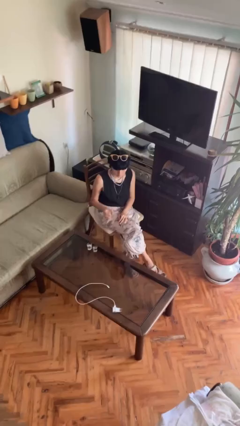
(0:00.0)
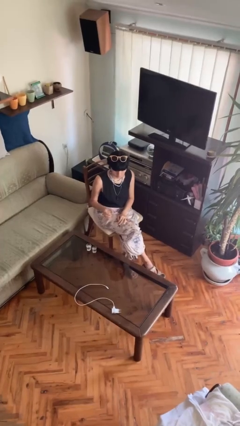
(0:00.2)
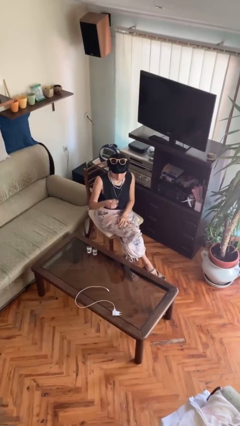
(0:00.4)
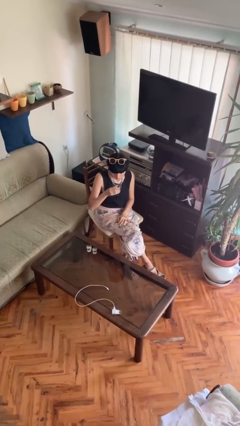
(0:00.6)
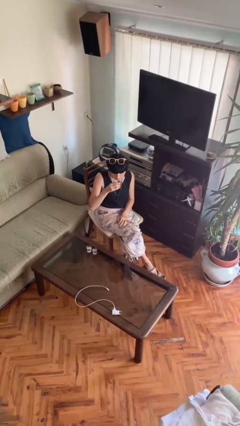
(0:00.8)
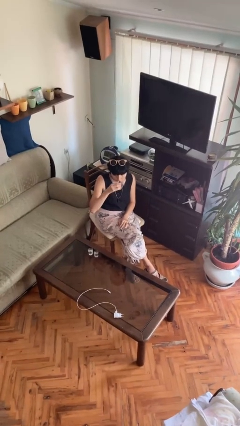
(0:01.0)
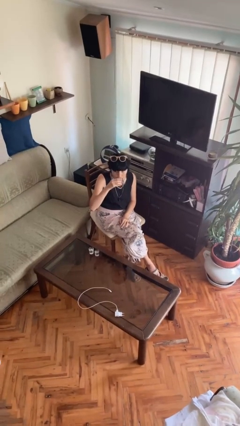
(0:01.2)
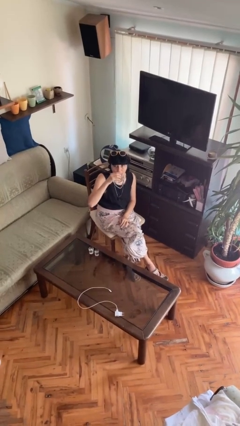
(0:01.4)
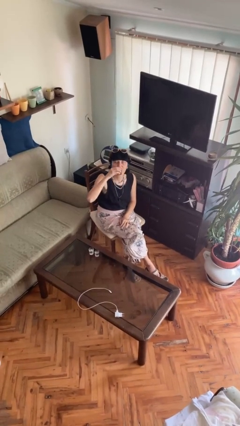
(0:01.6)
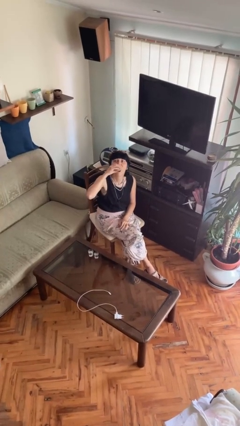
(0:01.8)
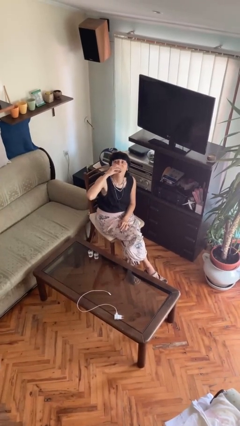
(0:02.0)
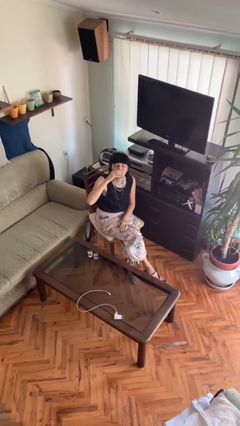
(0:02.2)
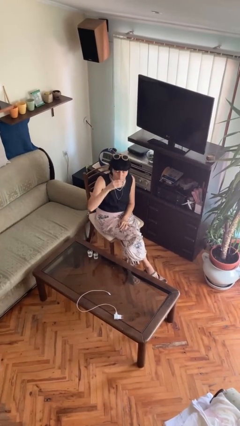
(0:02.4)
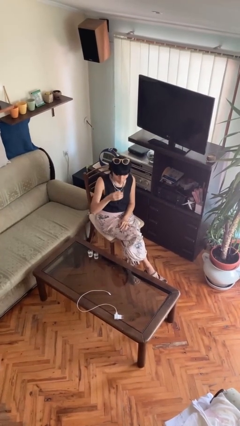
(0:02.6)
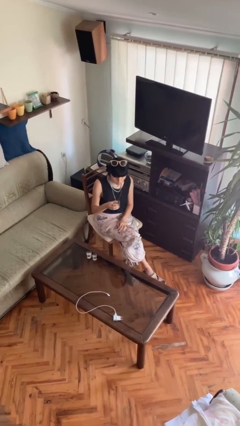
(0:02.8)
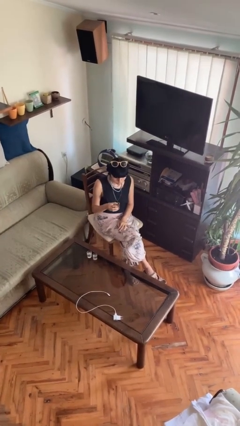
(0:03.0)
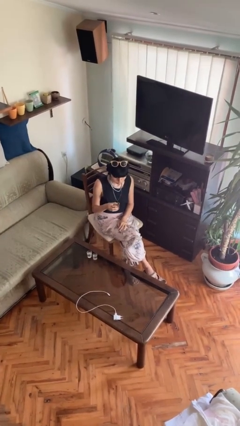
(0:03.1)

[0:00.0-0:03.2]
person drinks from shotglass

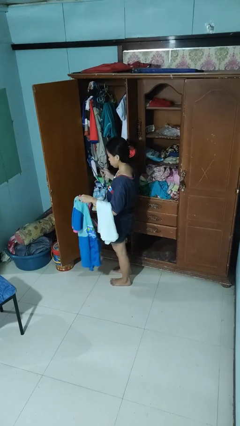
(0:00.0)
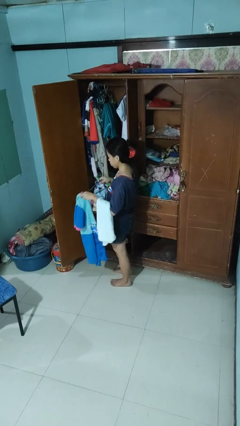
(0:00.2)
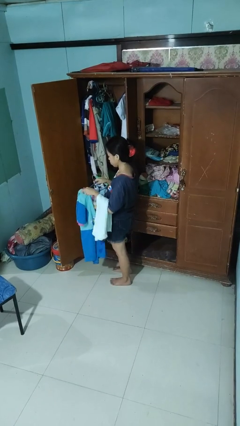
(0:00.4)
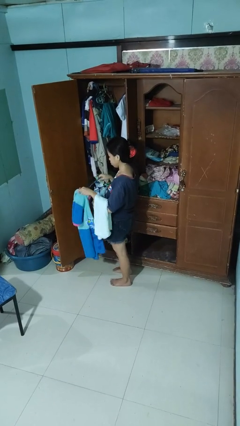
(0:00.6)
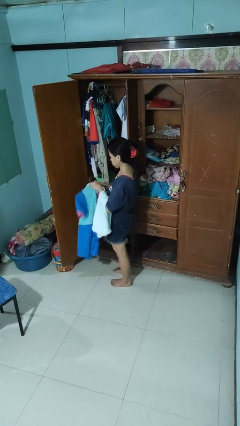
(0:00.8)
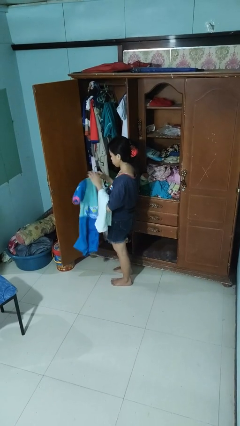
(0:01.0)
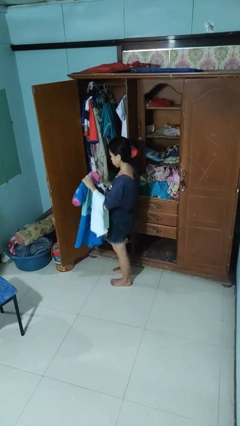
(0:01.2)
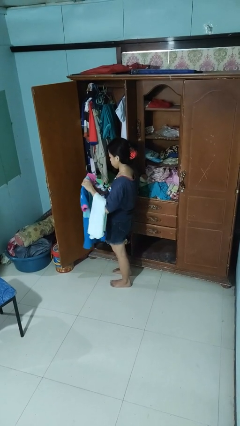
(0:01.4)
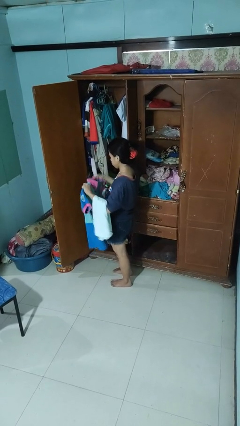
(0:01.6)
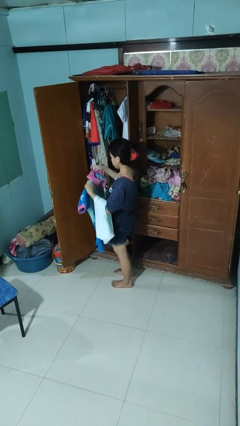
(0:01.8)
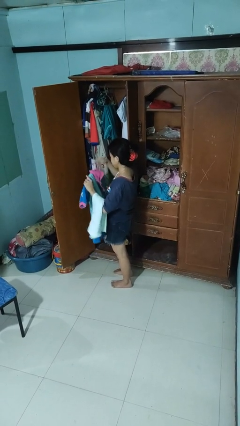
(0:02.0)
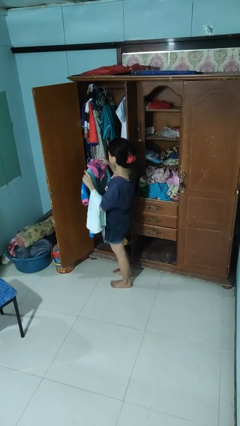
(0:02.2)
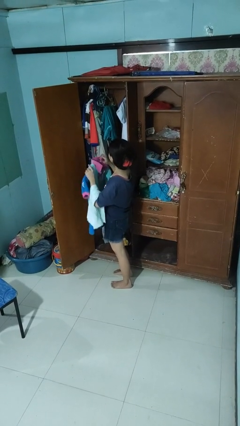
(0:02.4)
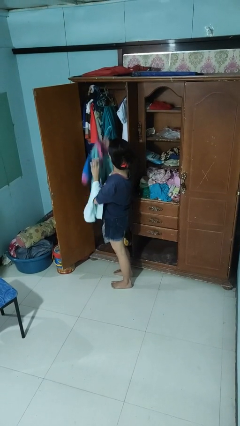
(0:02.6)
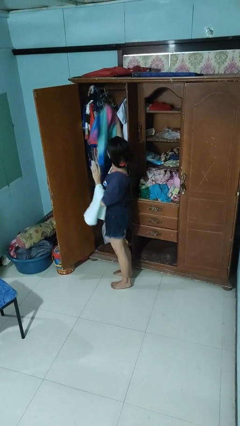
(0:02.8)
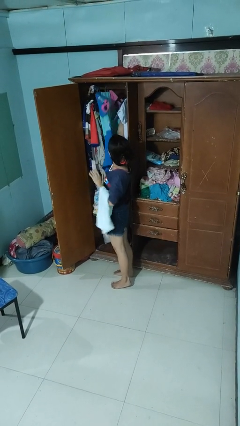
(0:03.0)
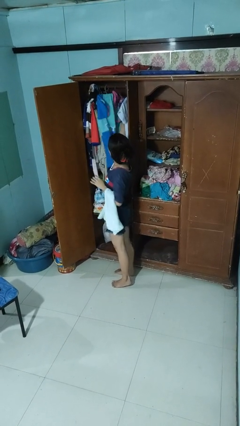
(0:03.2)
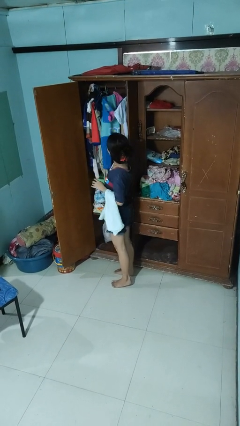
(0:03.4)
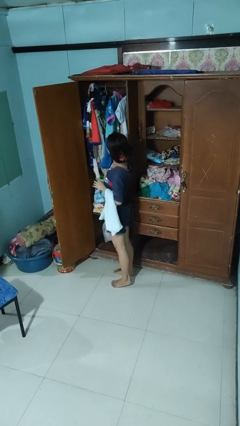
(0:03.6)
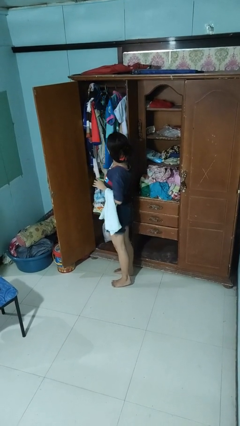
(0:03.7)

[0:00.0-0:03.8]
person puts clothes into closet

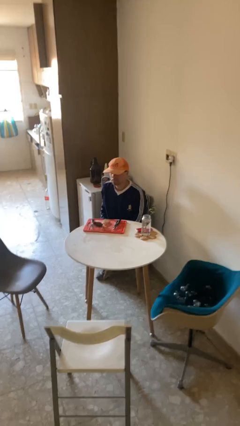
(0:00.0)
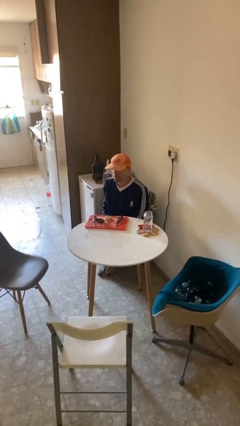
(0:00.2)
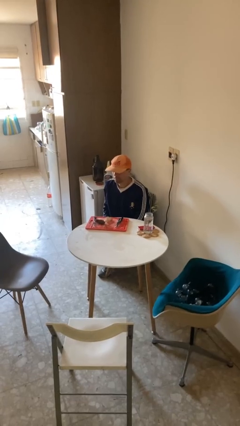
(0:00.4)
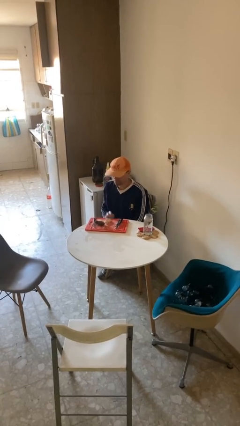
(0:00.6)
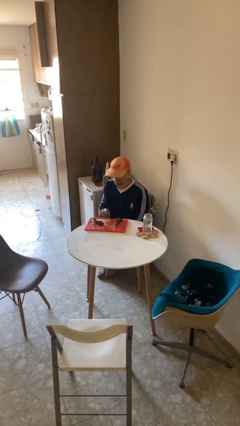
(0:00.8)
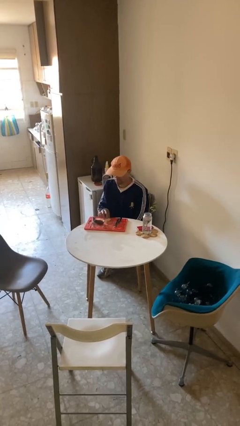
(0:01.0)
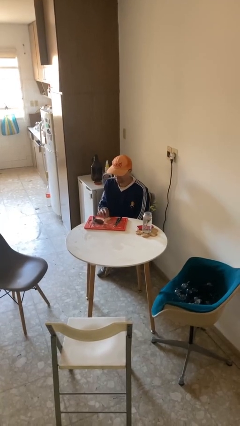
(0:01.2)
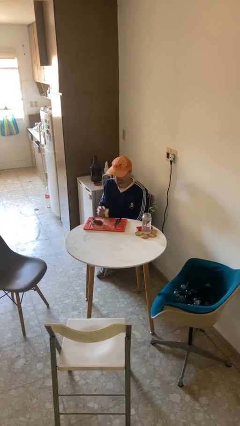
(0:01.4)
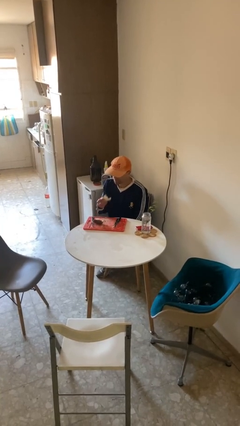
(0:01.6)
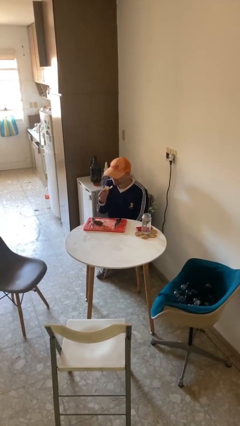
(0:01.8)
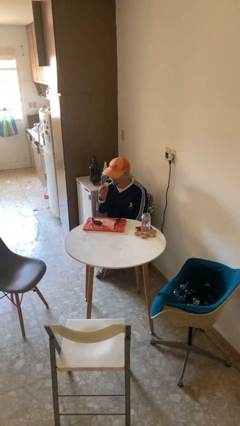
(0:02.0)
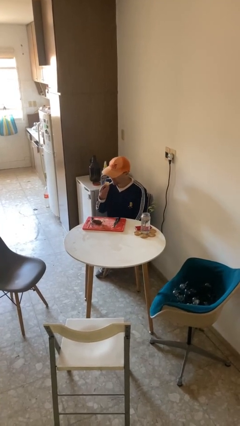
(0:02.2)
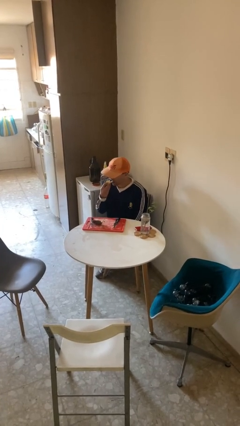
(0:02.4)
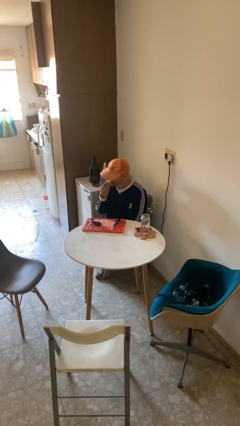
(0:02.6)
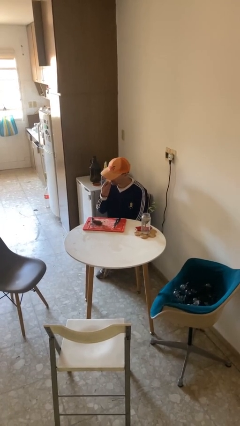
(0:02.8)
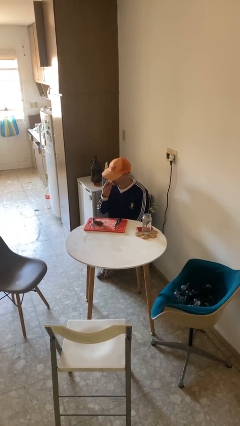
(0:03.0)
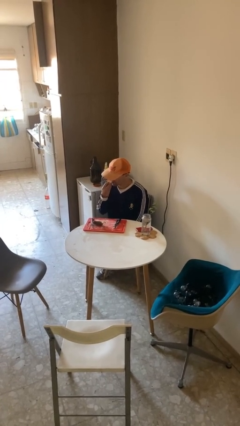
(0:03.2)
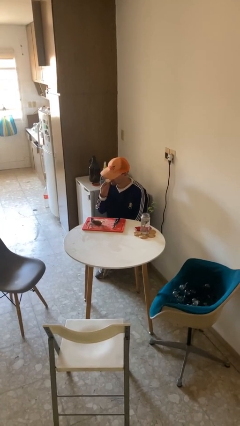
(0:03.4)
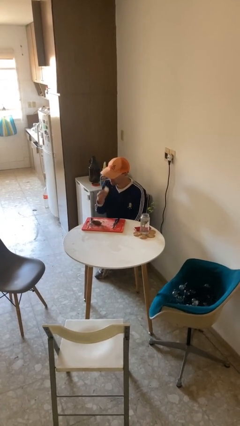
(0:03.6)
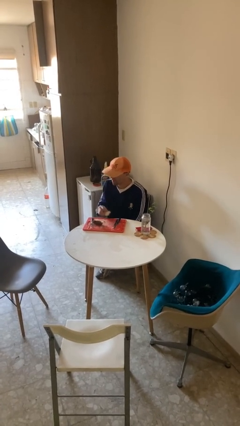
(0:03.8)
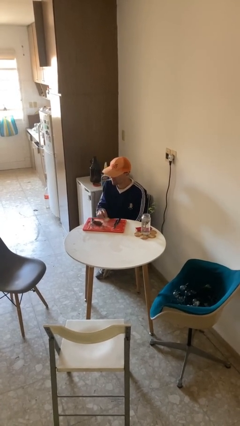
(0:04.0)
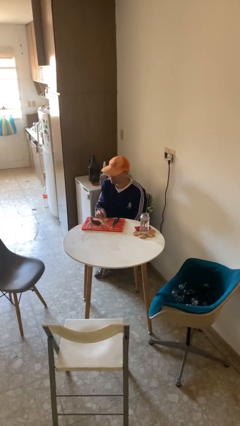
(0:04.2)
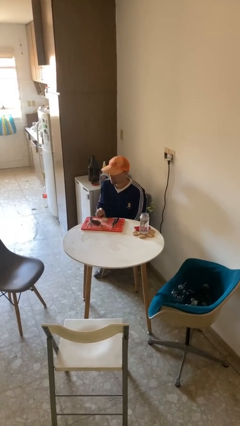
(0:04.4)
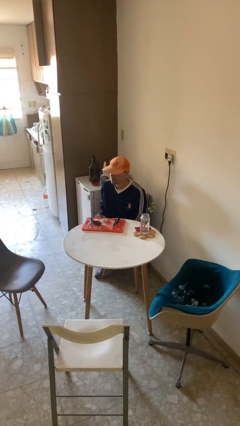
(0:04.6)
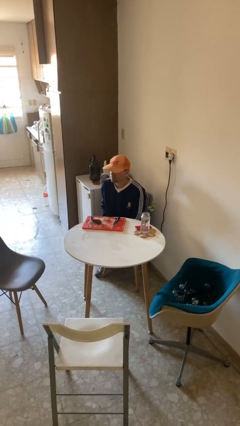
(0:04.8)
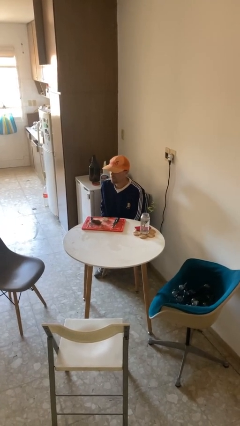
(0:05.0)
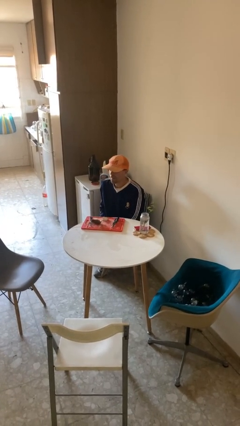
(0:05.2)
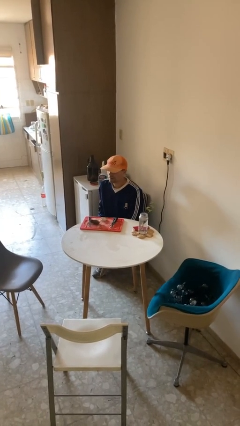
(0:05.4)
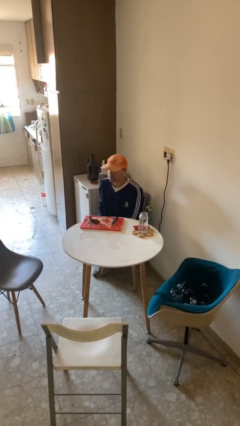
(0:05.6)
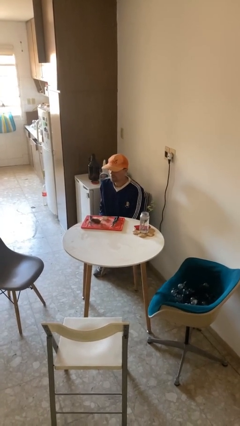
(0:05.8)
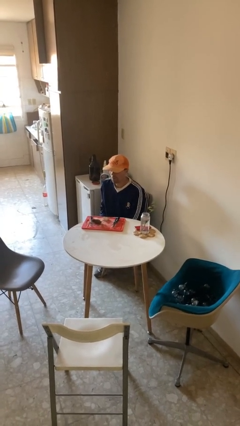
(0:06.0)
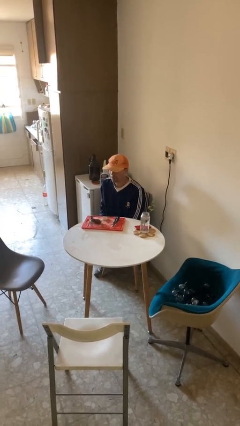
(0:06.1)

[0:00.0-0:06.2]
person eats with hands

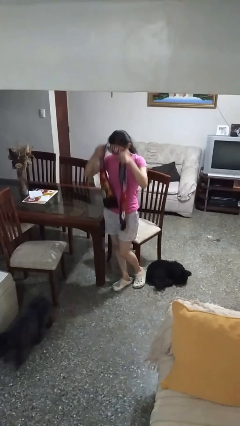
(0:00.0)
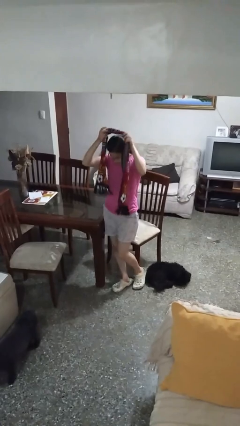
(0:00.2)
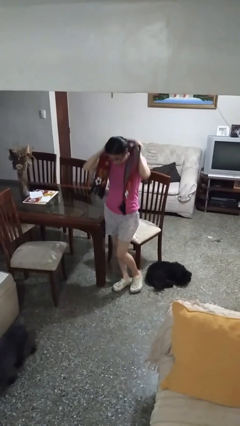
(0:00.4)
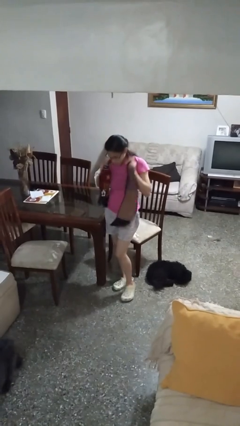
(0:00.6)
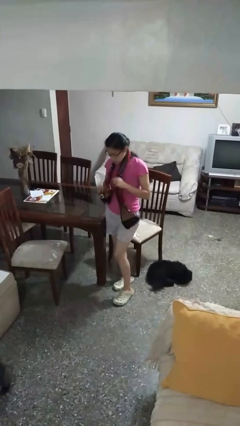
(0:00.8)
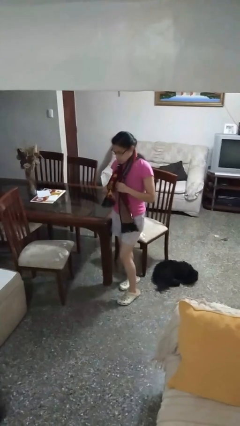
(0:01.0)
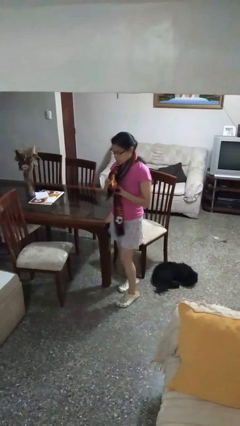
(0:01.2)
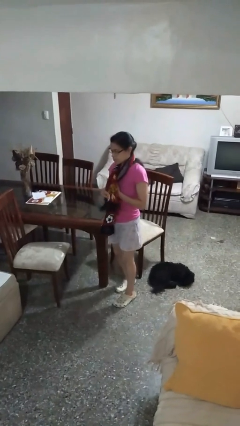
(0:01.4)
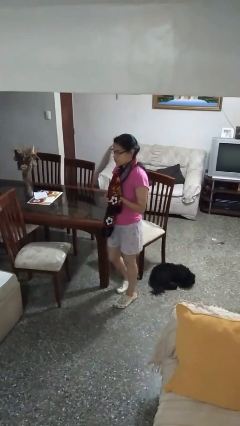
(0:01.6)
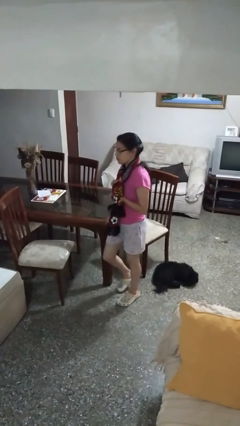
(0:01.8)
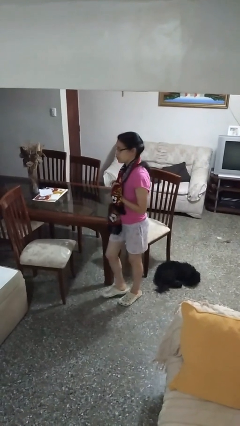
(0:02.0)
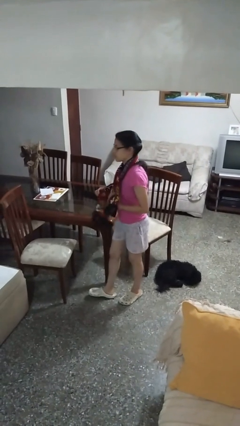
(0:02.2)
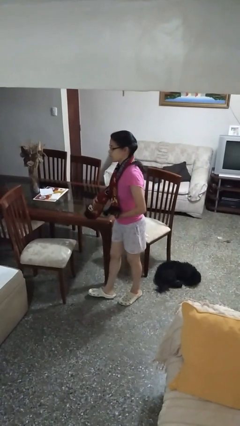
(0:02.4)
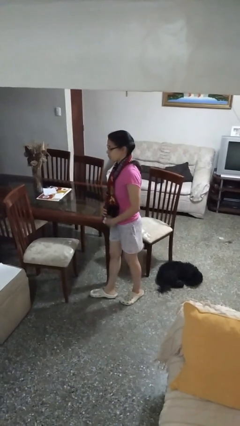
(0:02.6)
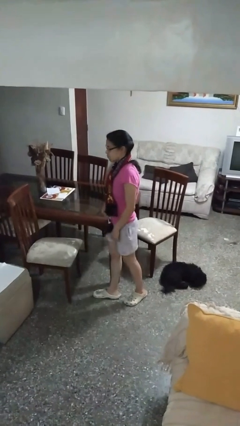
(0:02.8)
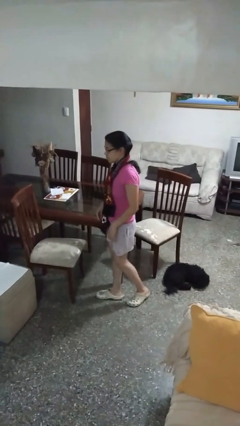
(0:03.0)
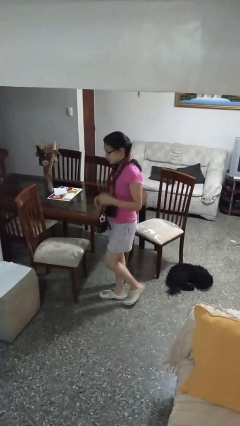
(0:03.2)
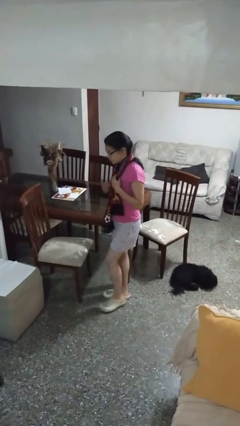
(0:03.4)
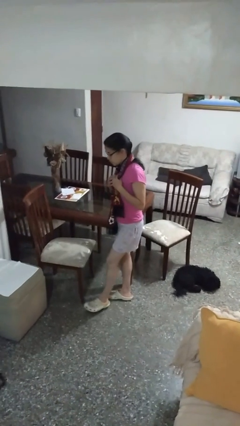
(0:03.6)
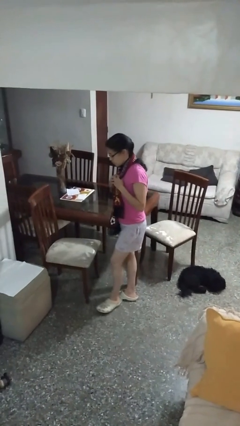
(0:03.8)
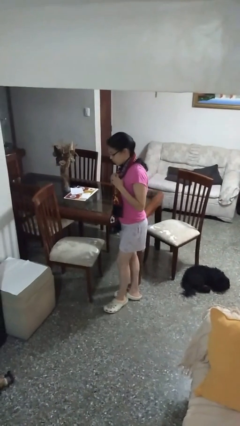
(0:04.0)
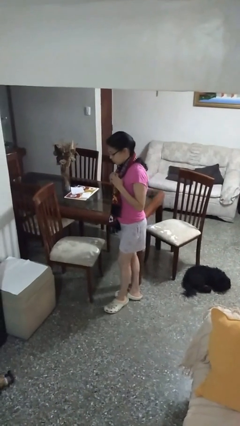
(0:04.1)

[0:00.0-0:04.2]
person puts on scarf

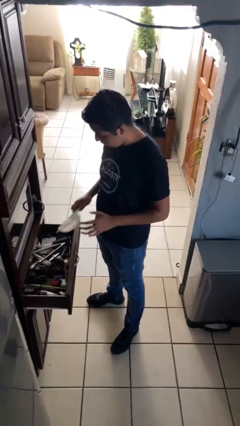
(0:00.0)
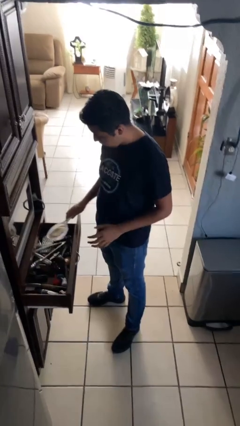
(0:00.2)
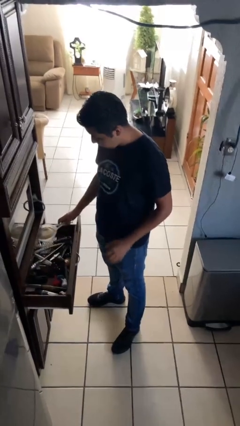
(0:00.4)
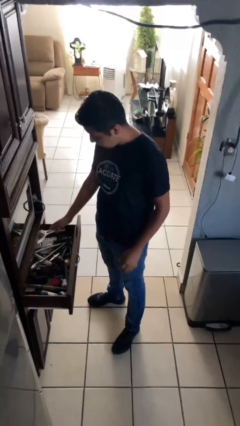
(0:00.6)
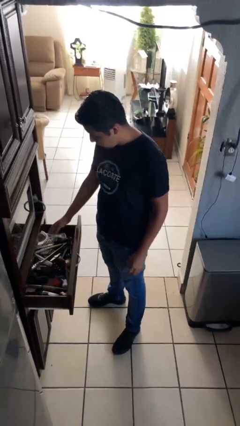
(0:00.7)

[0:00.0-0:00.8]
person puts object into kitchen drawer
